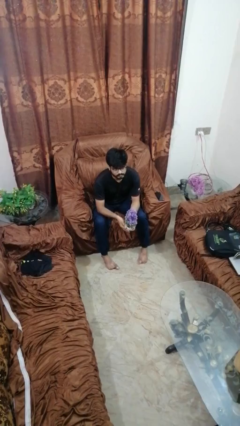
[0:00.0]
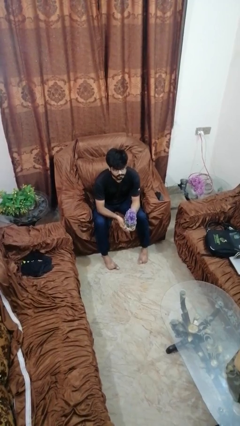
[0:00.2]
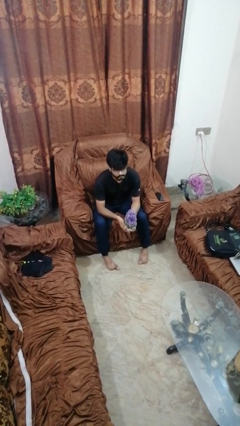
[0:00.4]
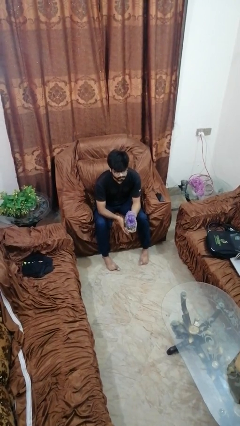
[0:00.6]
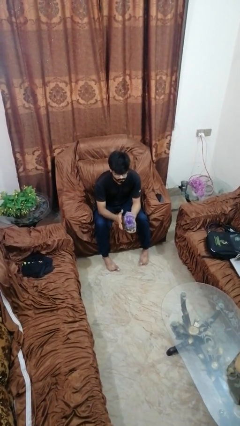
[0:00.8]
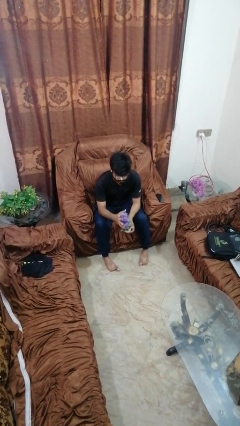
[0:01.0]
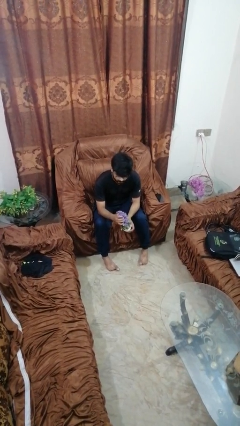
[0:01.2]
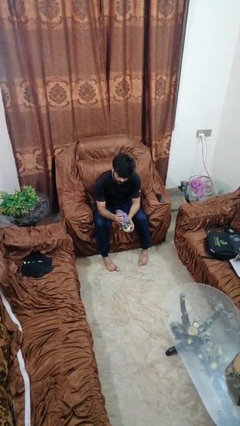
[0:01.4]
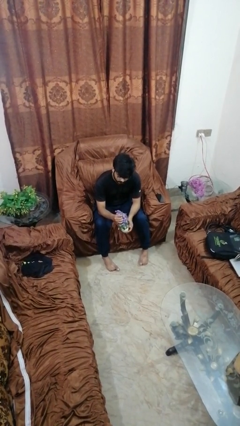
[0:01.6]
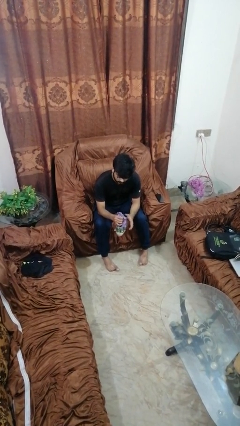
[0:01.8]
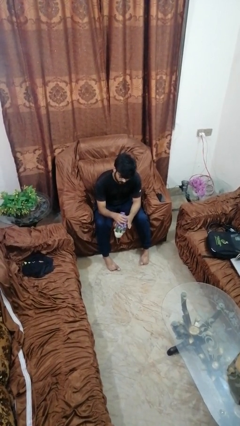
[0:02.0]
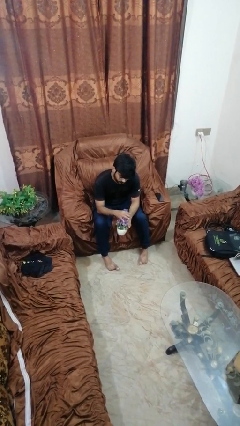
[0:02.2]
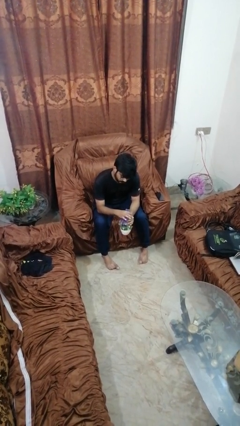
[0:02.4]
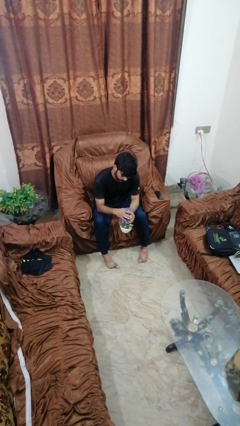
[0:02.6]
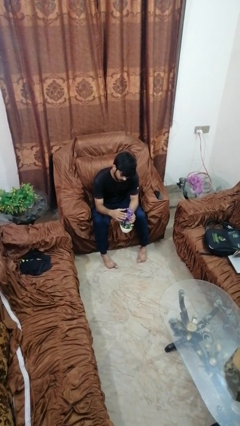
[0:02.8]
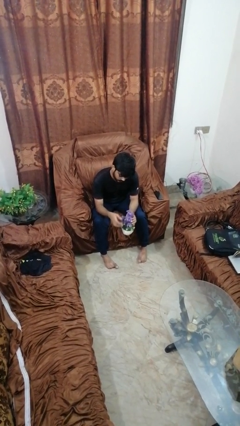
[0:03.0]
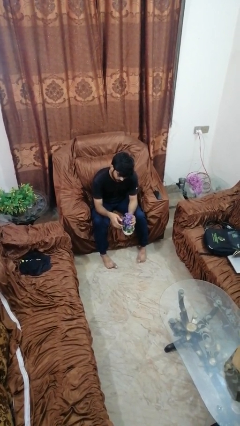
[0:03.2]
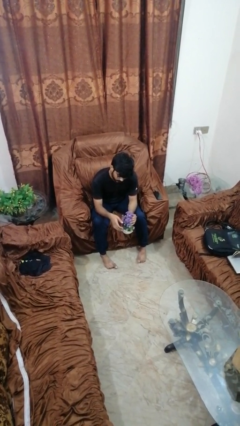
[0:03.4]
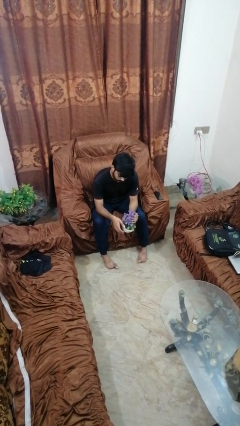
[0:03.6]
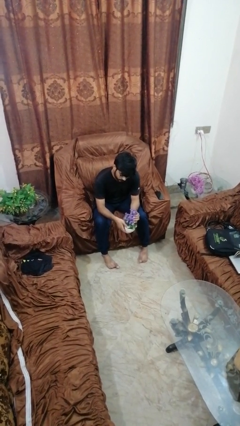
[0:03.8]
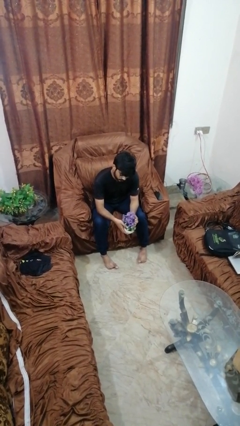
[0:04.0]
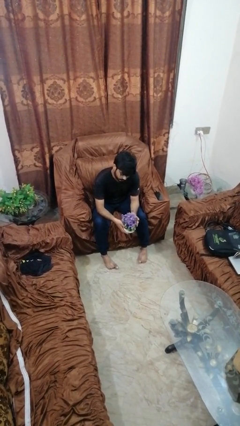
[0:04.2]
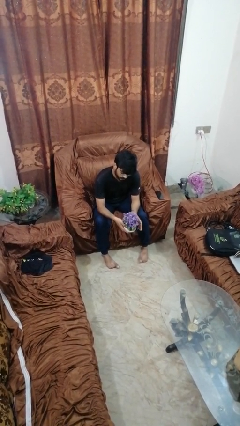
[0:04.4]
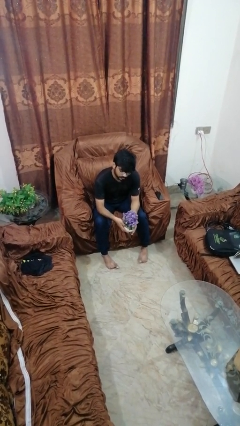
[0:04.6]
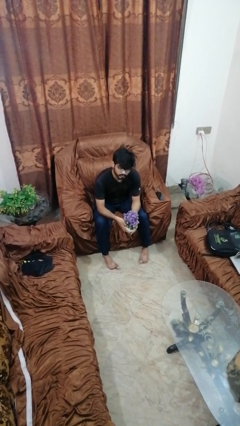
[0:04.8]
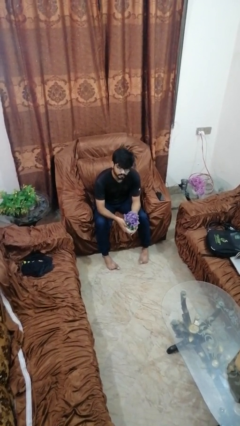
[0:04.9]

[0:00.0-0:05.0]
person squeezes object

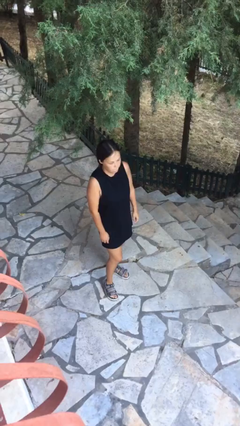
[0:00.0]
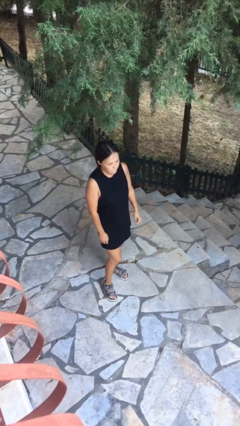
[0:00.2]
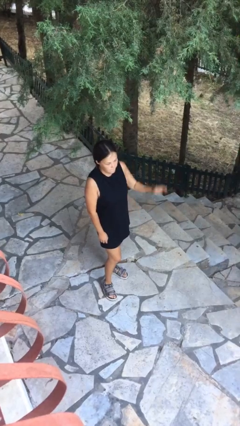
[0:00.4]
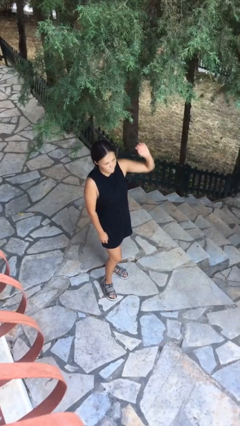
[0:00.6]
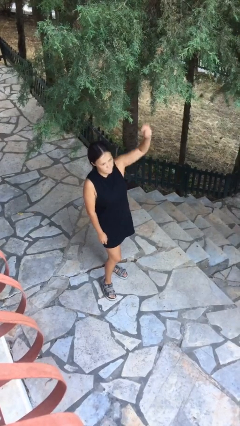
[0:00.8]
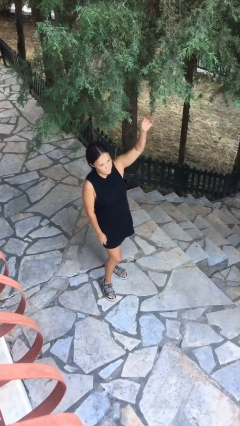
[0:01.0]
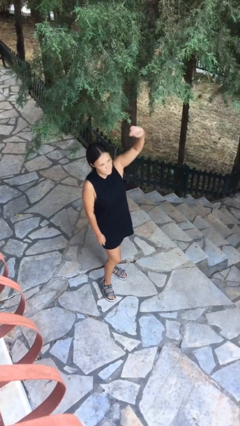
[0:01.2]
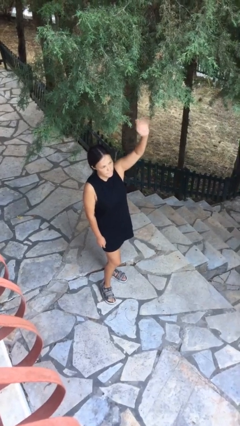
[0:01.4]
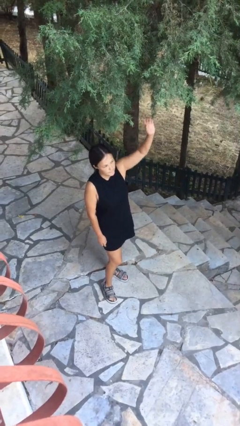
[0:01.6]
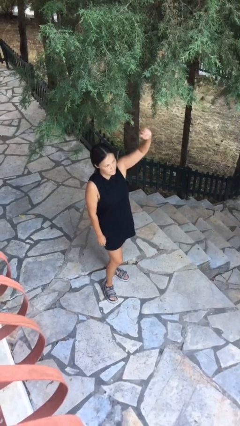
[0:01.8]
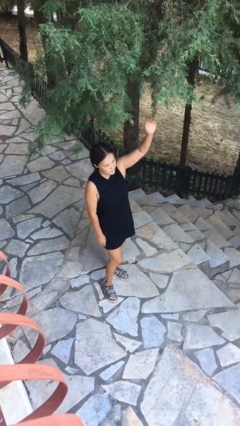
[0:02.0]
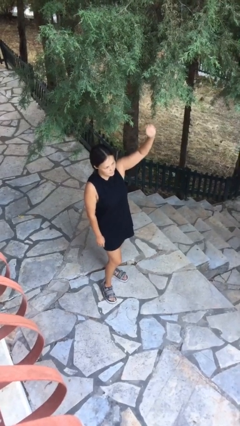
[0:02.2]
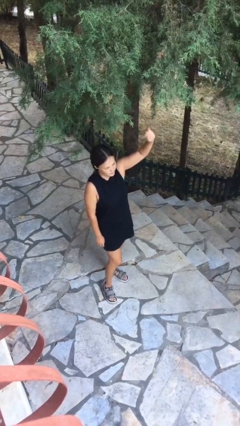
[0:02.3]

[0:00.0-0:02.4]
person gestures raise hand

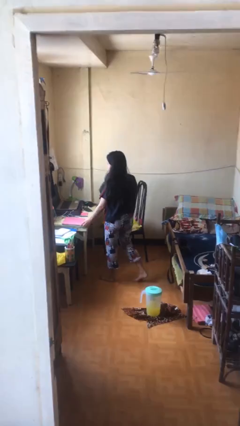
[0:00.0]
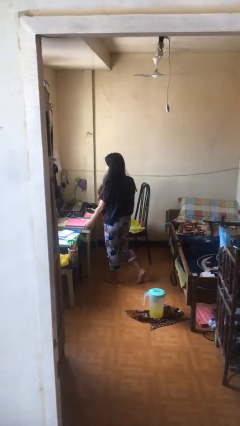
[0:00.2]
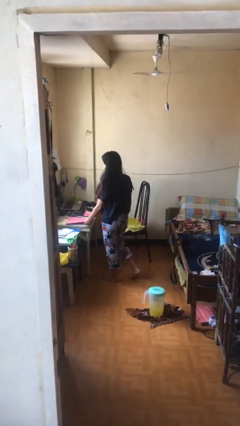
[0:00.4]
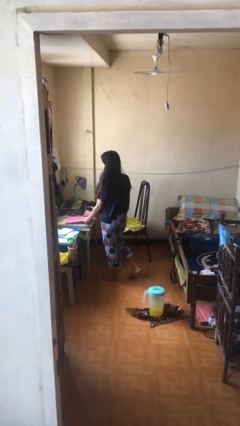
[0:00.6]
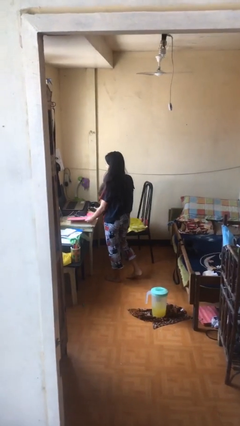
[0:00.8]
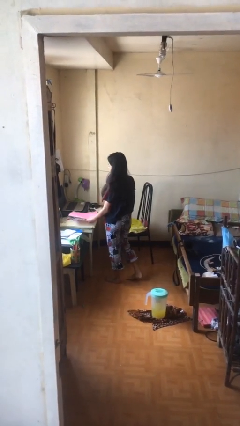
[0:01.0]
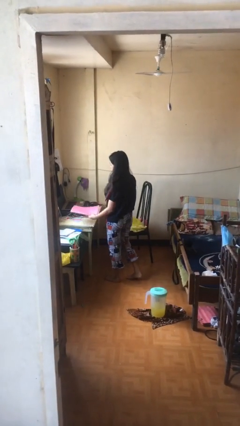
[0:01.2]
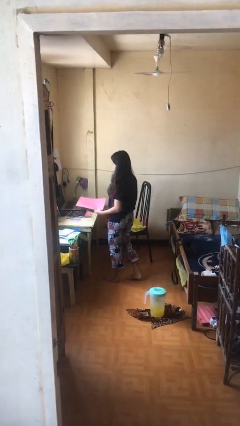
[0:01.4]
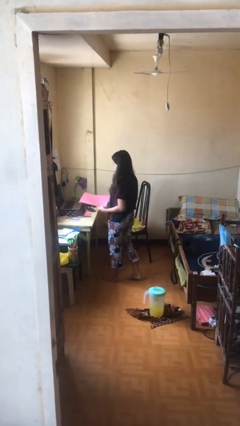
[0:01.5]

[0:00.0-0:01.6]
person picks up object from table

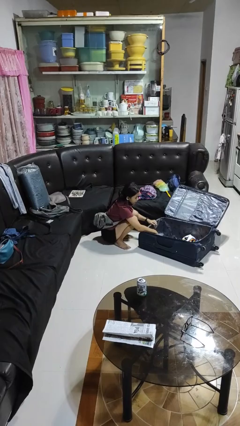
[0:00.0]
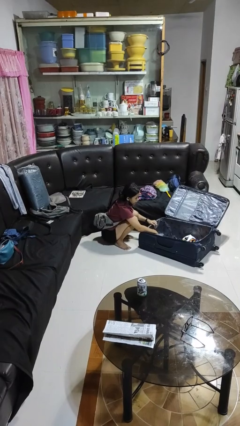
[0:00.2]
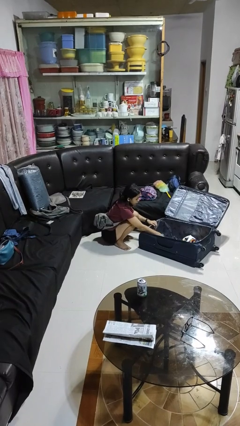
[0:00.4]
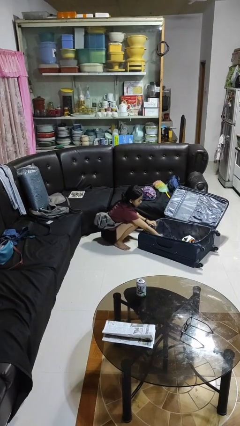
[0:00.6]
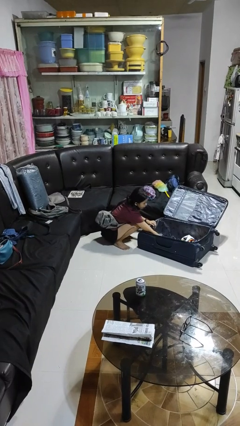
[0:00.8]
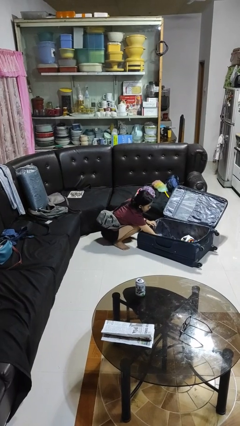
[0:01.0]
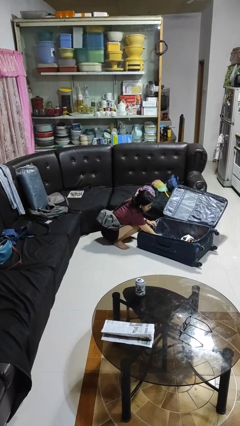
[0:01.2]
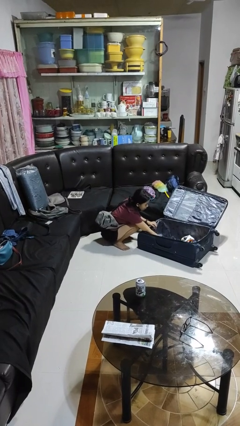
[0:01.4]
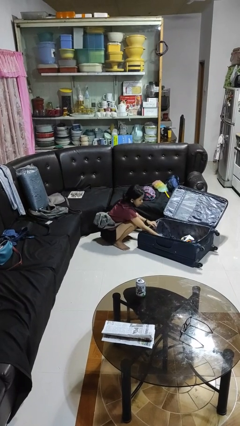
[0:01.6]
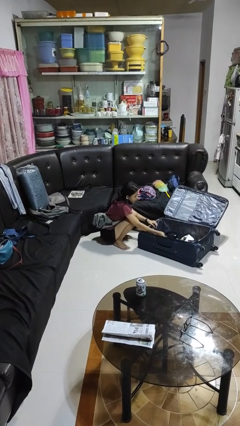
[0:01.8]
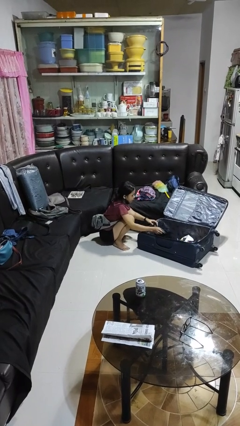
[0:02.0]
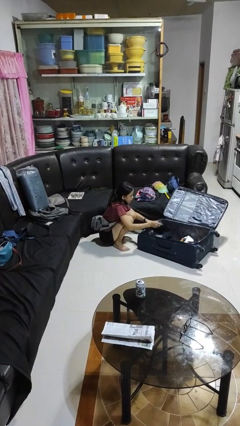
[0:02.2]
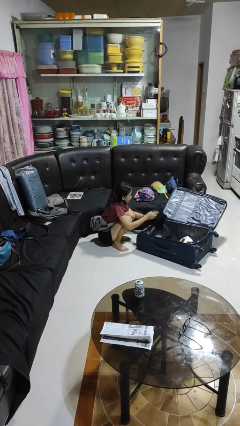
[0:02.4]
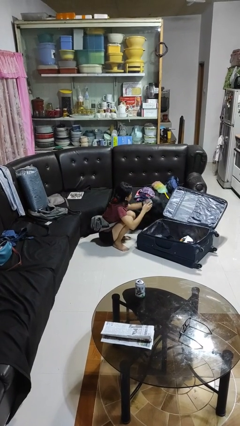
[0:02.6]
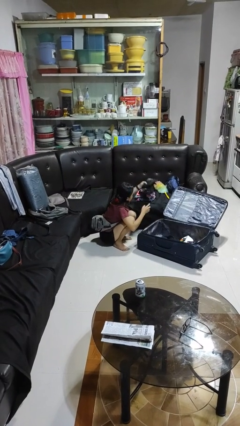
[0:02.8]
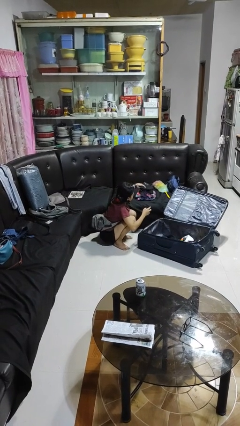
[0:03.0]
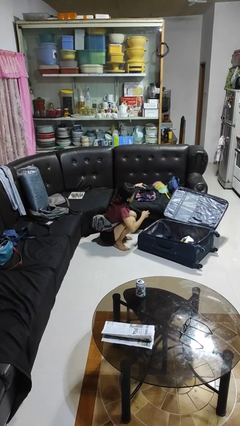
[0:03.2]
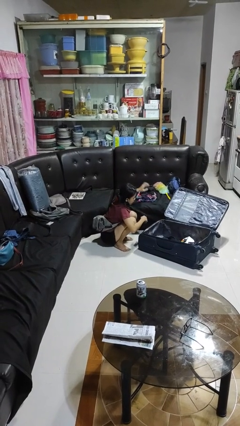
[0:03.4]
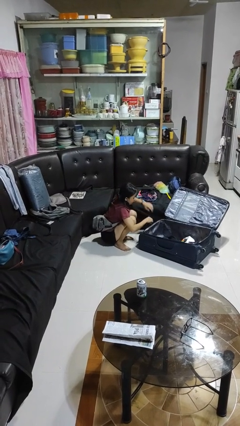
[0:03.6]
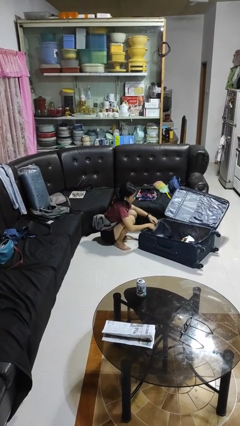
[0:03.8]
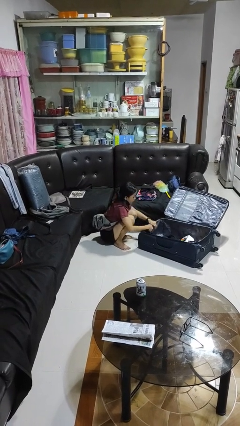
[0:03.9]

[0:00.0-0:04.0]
person unloads clothes from suitcase

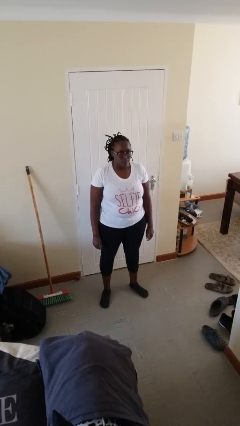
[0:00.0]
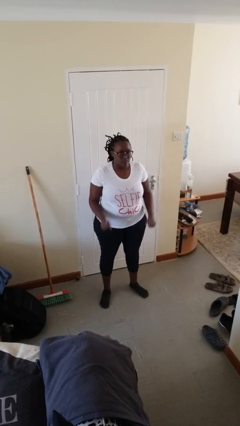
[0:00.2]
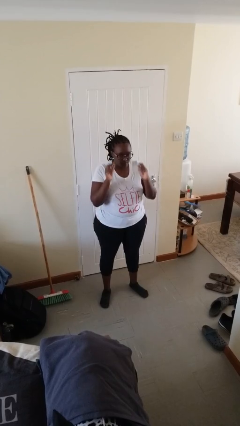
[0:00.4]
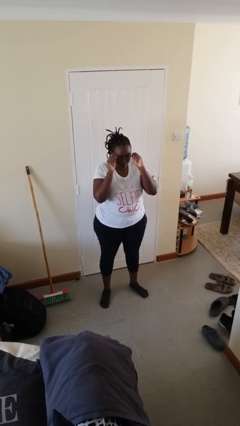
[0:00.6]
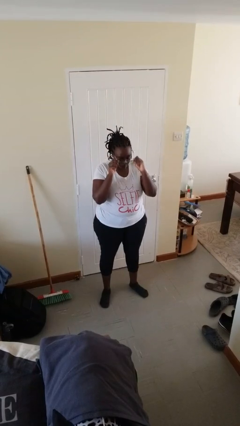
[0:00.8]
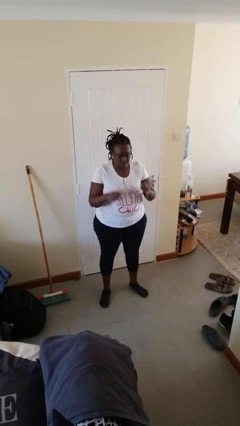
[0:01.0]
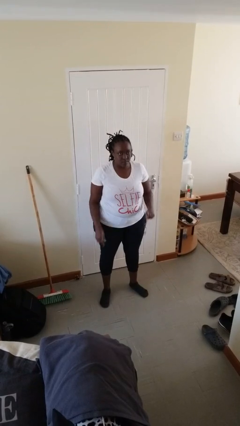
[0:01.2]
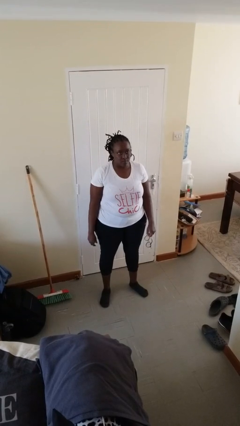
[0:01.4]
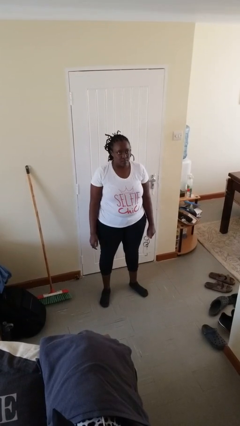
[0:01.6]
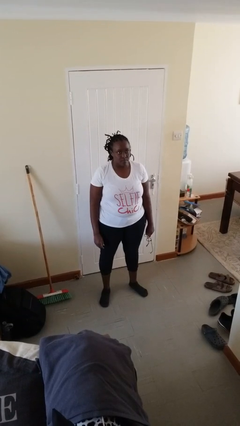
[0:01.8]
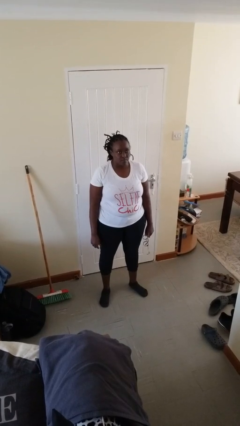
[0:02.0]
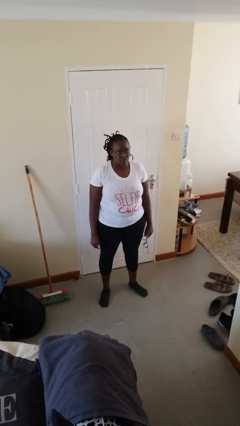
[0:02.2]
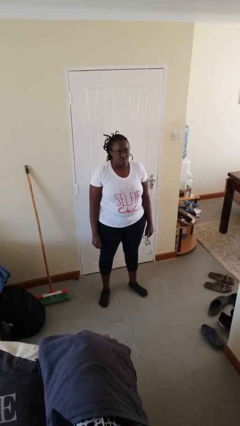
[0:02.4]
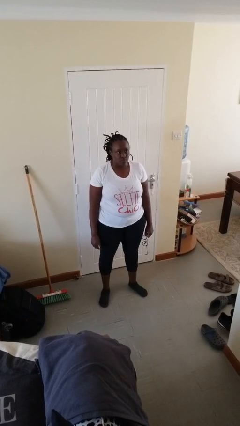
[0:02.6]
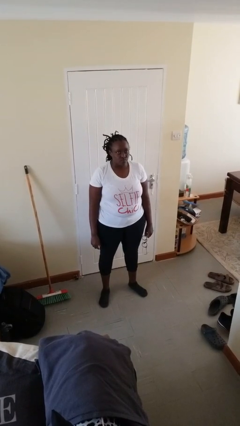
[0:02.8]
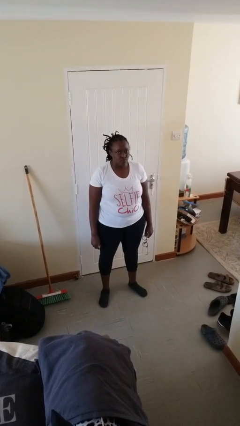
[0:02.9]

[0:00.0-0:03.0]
person takes off glasses

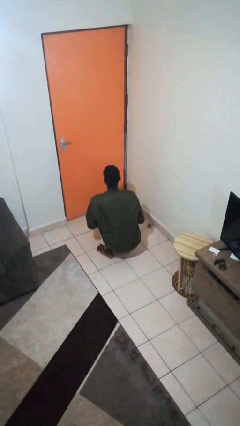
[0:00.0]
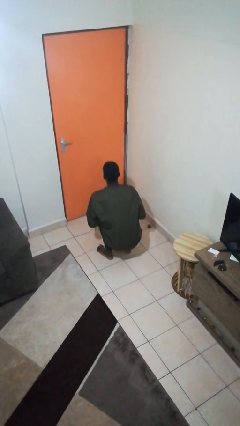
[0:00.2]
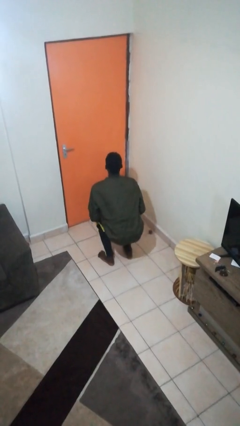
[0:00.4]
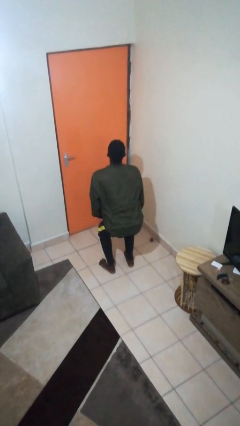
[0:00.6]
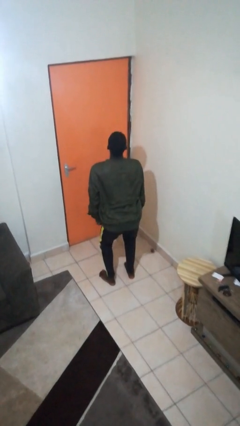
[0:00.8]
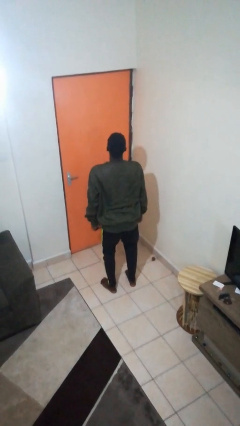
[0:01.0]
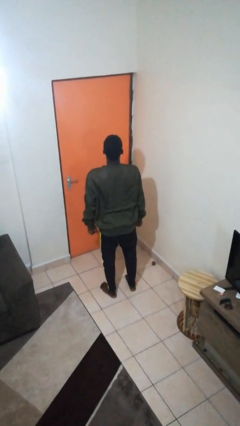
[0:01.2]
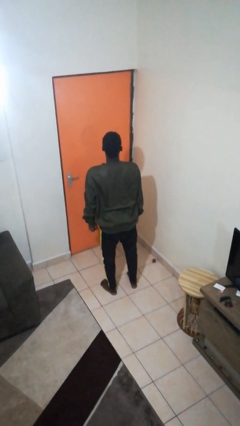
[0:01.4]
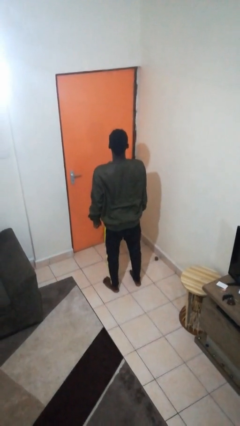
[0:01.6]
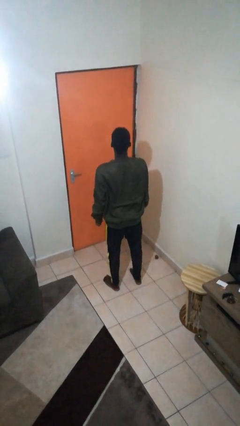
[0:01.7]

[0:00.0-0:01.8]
person stands up
